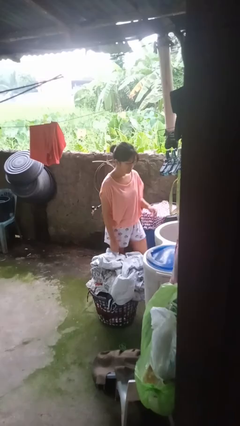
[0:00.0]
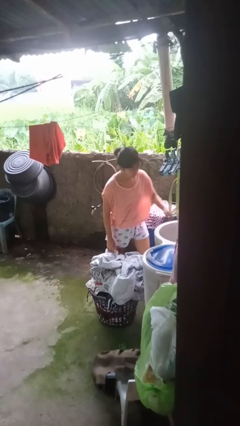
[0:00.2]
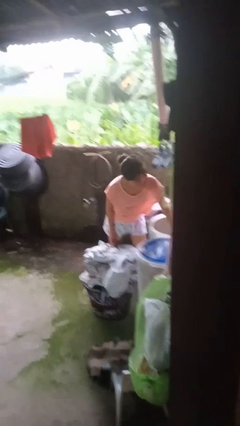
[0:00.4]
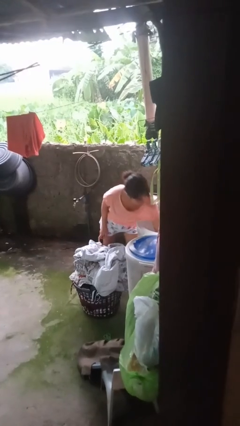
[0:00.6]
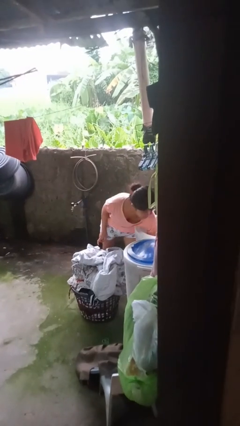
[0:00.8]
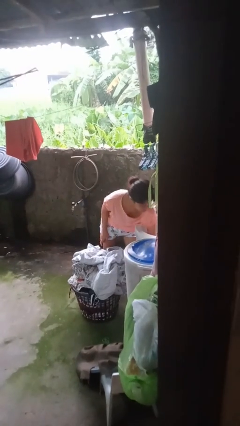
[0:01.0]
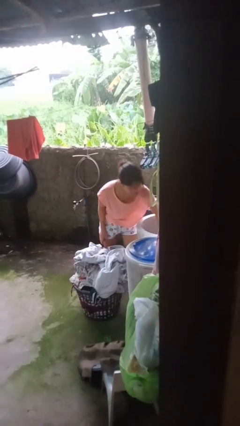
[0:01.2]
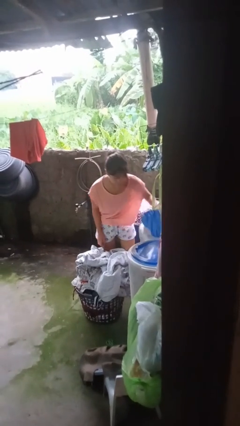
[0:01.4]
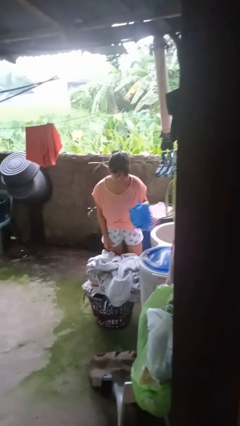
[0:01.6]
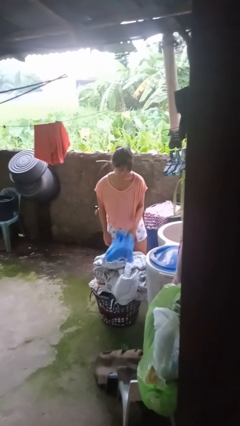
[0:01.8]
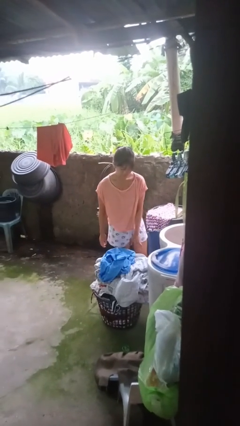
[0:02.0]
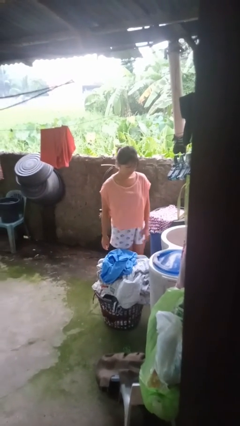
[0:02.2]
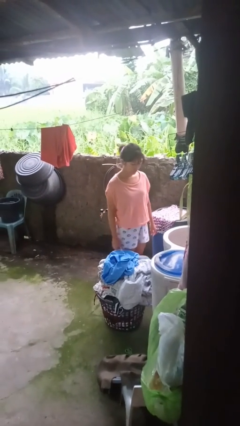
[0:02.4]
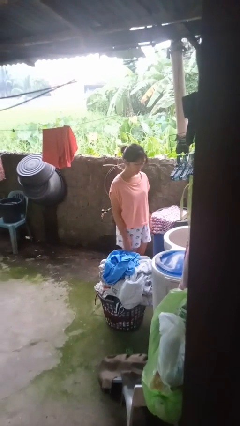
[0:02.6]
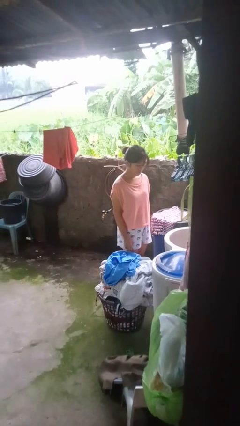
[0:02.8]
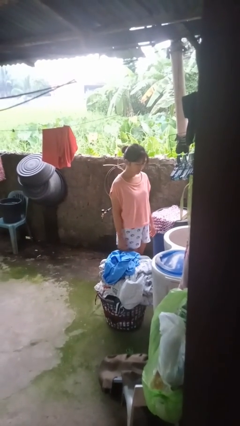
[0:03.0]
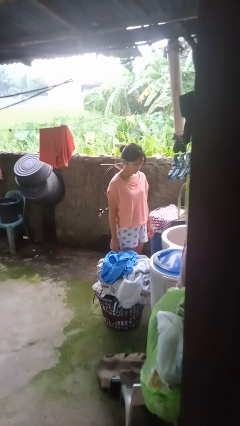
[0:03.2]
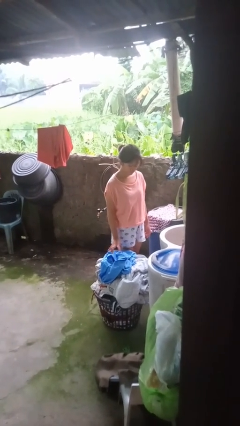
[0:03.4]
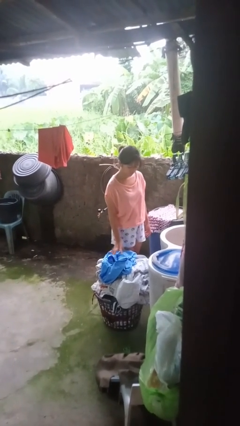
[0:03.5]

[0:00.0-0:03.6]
person unloads clotheswasher

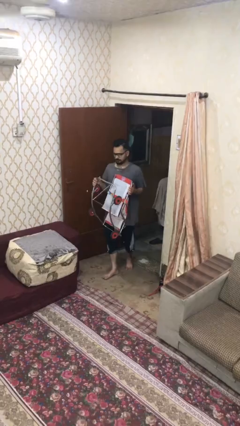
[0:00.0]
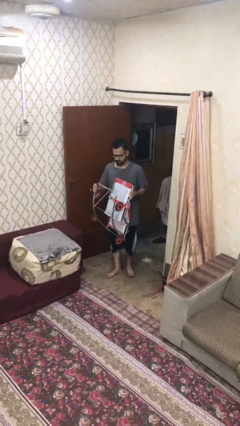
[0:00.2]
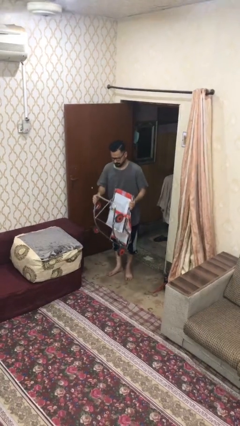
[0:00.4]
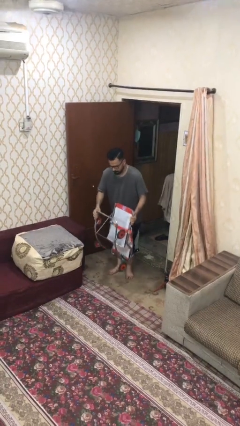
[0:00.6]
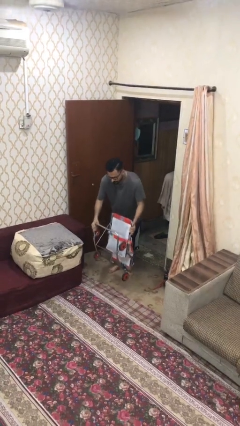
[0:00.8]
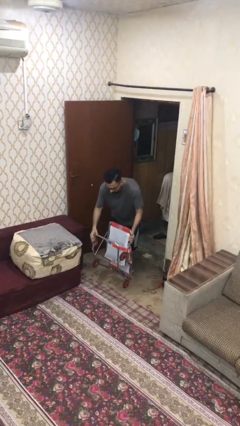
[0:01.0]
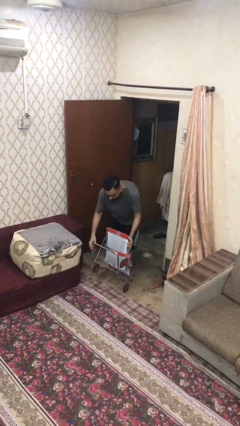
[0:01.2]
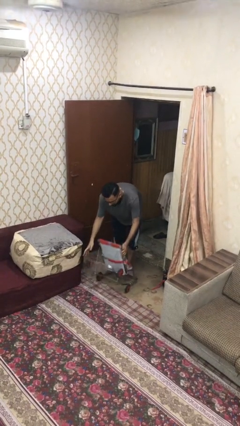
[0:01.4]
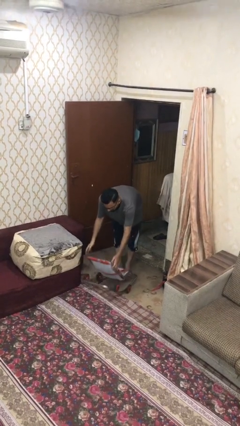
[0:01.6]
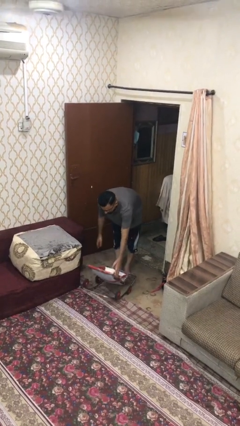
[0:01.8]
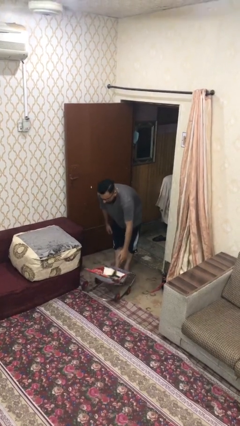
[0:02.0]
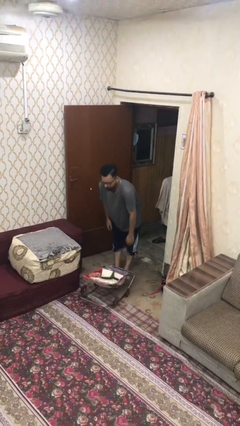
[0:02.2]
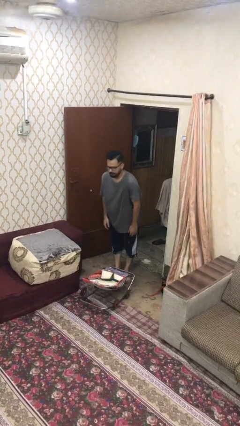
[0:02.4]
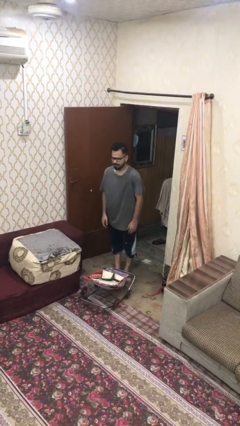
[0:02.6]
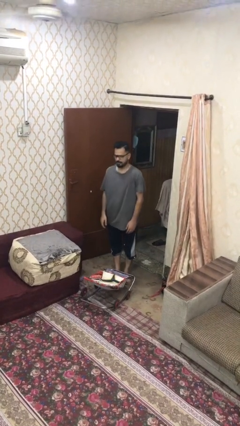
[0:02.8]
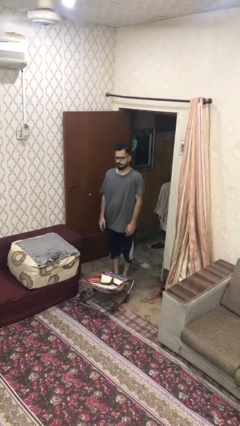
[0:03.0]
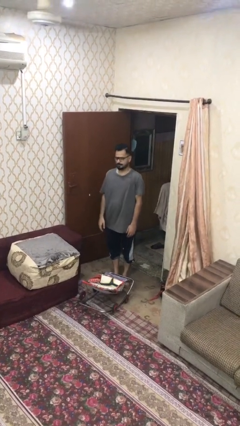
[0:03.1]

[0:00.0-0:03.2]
person puts down object on floor

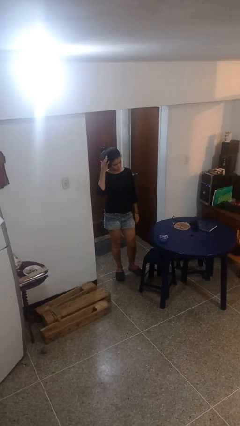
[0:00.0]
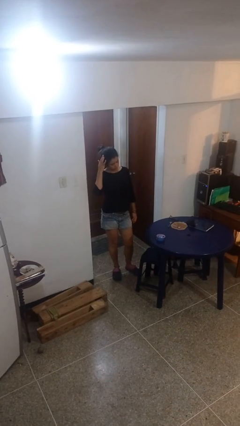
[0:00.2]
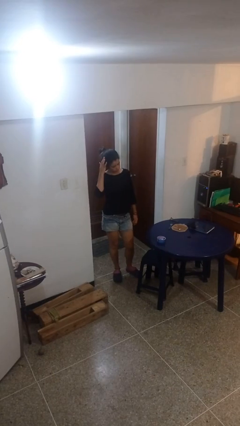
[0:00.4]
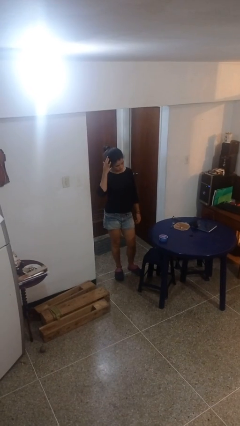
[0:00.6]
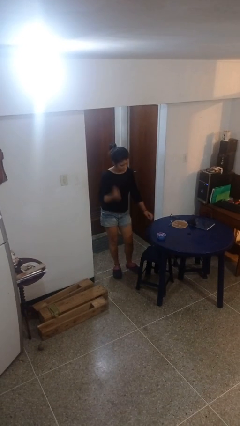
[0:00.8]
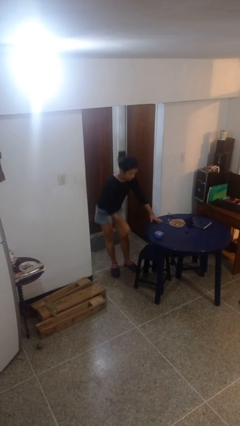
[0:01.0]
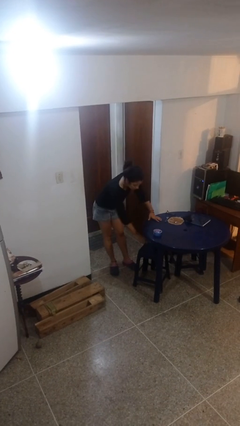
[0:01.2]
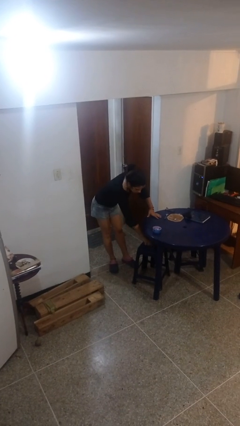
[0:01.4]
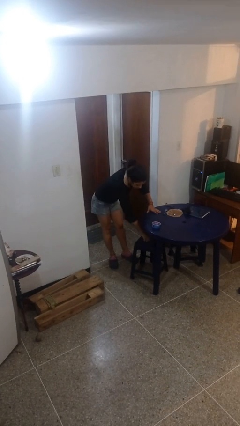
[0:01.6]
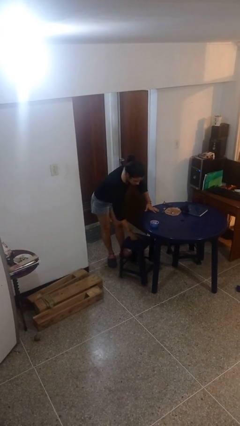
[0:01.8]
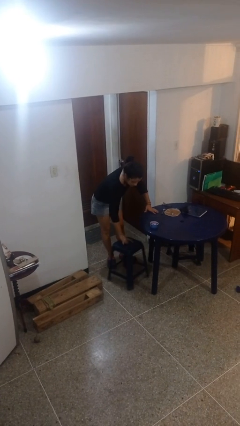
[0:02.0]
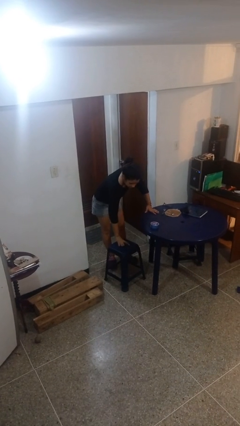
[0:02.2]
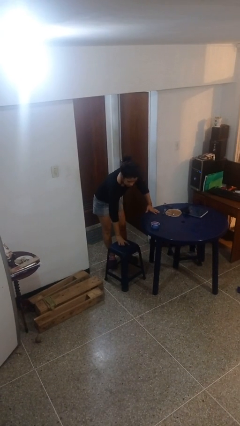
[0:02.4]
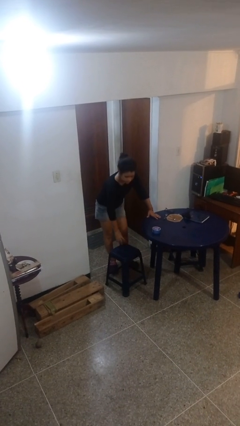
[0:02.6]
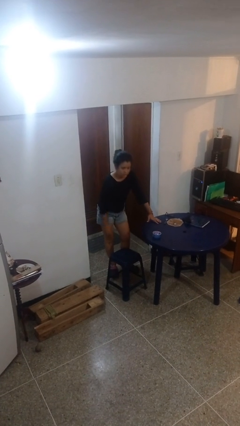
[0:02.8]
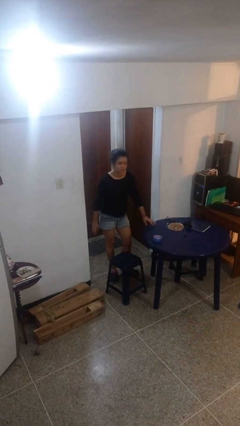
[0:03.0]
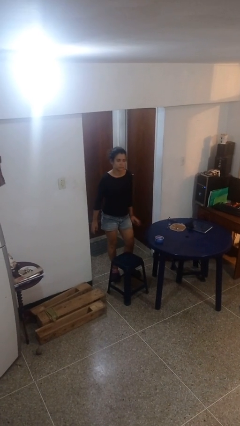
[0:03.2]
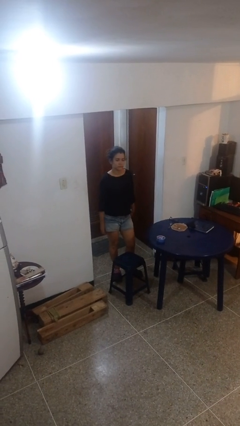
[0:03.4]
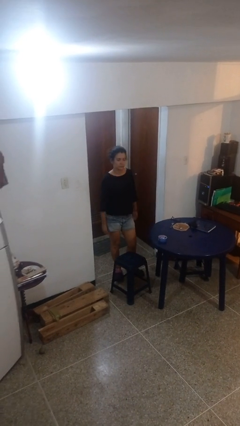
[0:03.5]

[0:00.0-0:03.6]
person pulls out chair

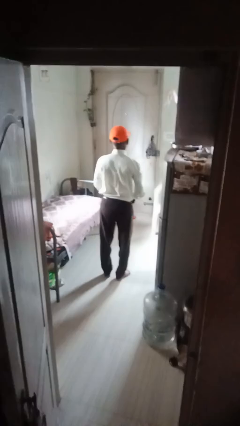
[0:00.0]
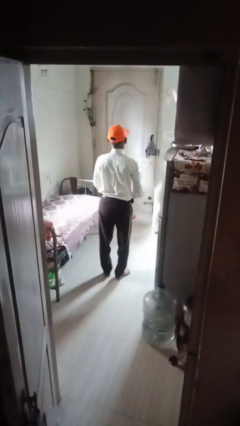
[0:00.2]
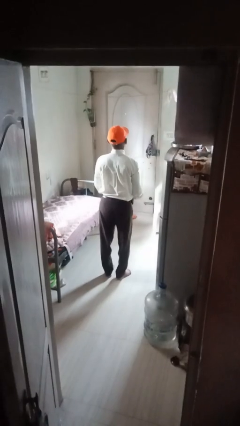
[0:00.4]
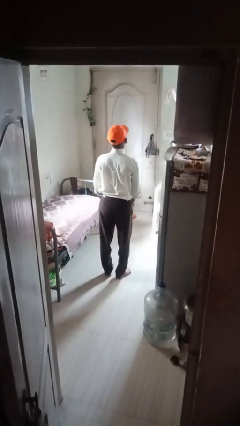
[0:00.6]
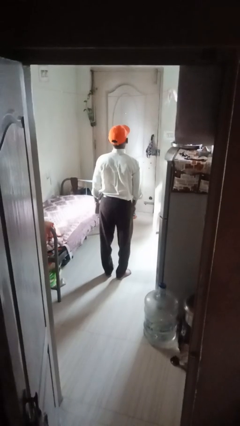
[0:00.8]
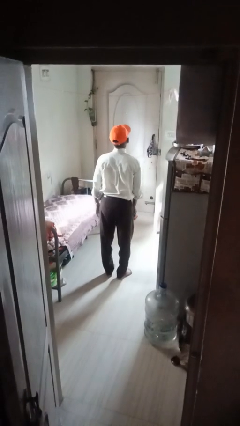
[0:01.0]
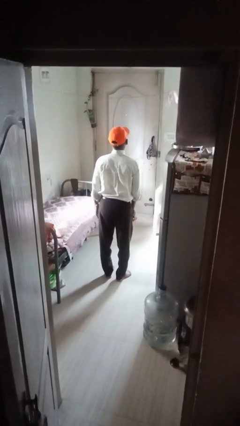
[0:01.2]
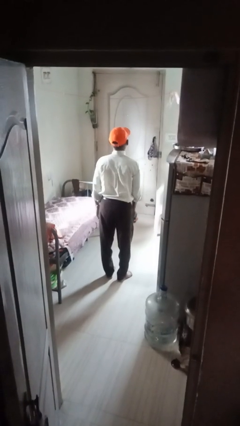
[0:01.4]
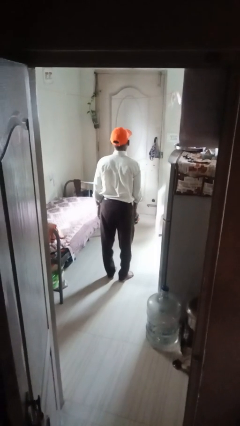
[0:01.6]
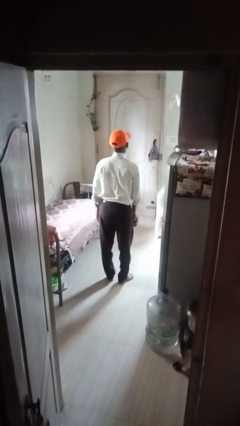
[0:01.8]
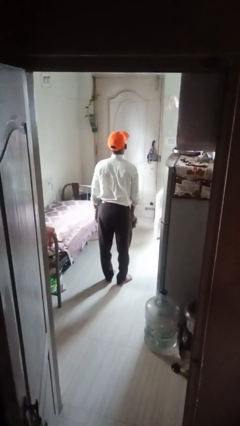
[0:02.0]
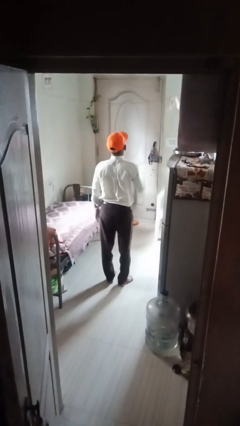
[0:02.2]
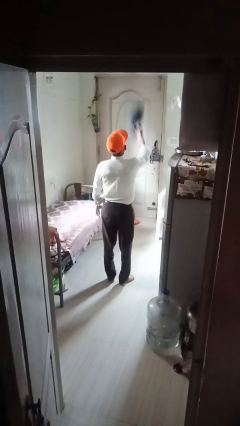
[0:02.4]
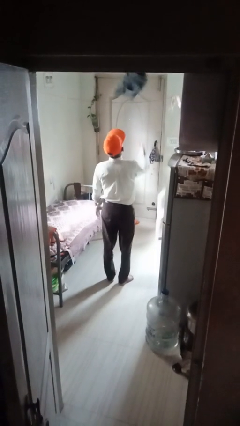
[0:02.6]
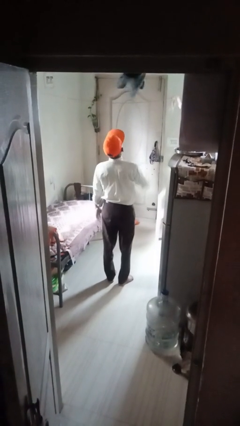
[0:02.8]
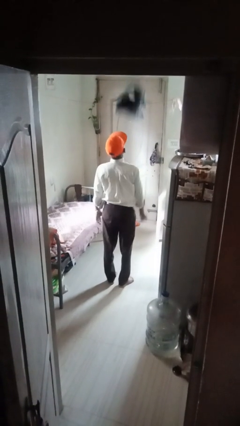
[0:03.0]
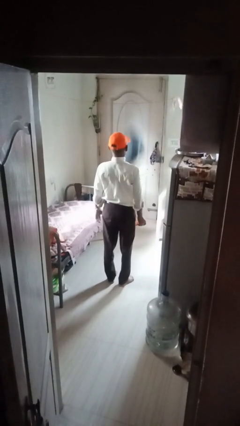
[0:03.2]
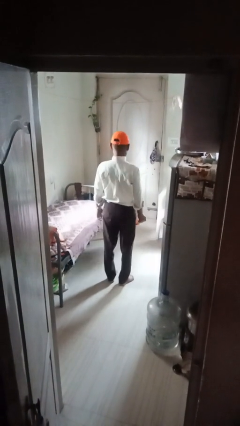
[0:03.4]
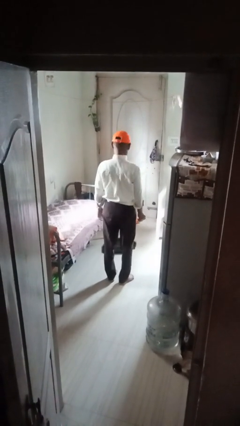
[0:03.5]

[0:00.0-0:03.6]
person throws object into air

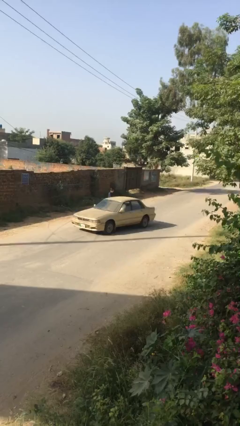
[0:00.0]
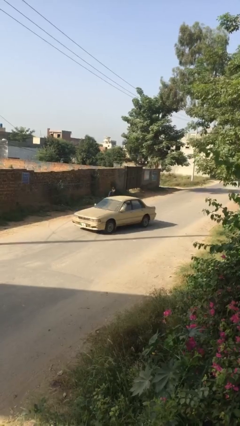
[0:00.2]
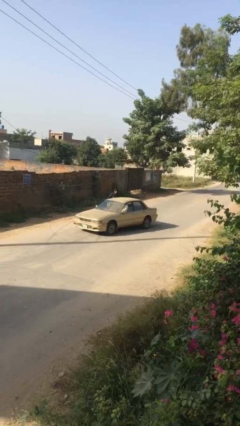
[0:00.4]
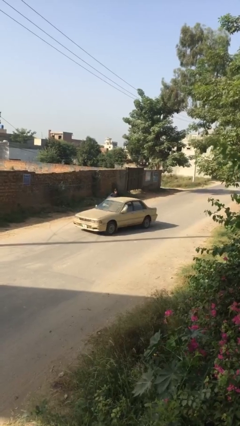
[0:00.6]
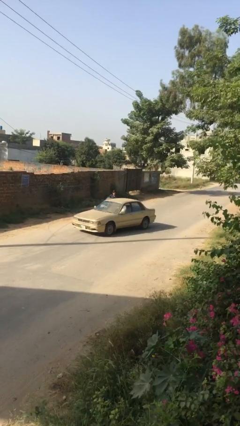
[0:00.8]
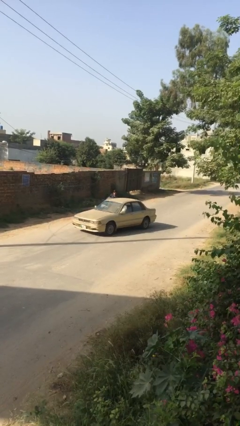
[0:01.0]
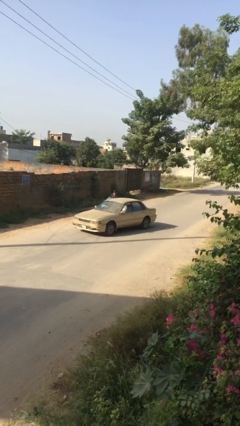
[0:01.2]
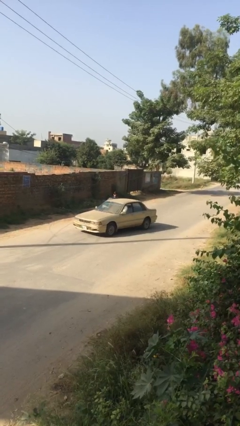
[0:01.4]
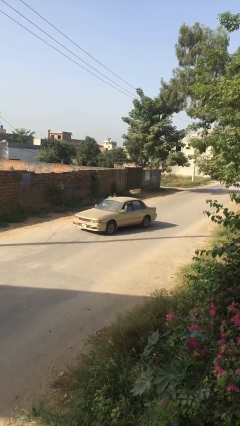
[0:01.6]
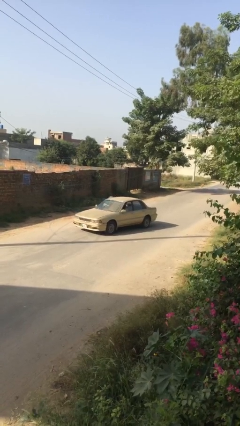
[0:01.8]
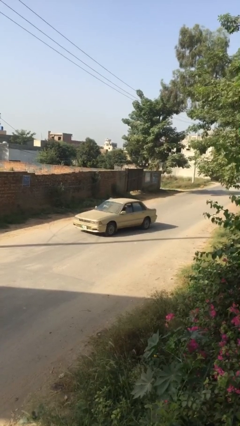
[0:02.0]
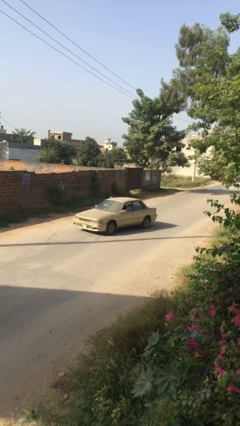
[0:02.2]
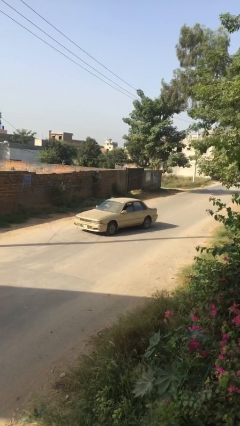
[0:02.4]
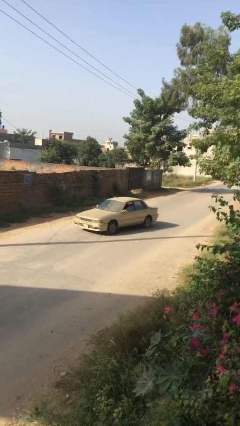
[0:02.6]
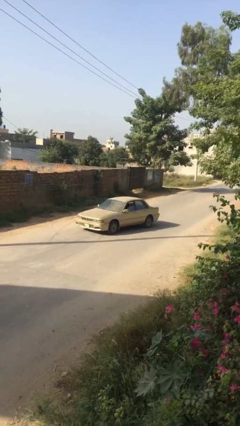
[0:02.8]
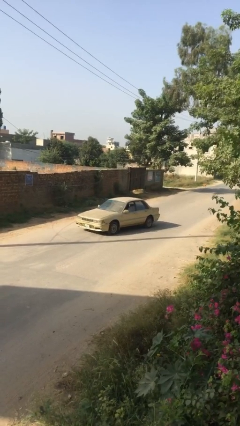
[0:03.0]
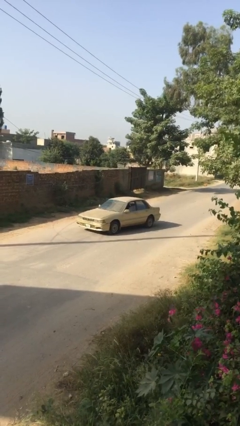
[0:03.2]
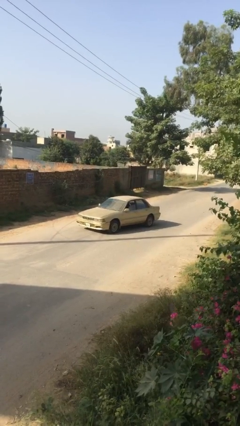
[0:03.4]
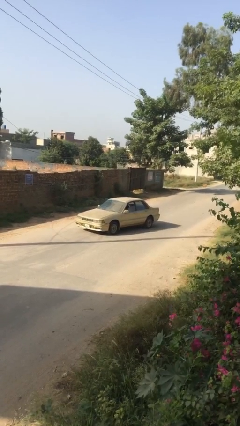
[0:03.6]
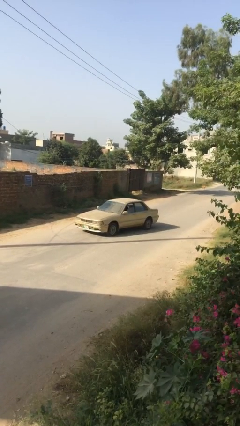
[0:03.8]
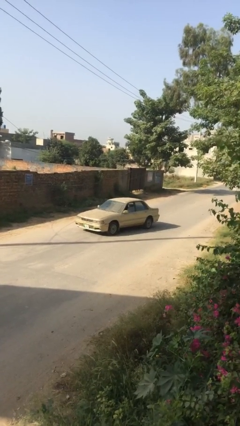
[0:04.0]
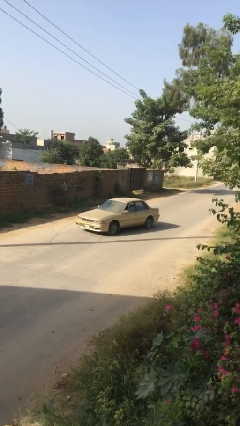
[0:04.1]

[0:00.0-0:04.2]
car picks up person
